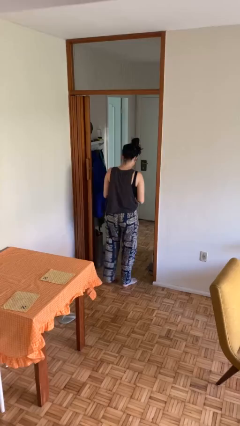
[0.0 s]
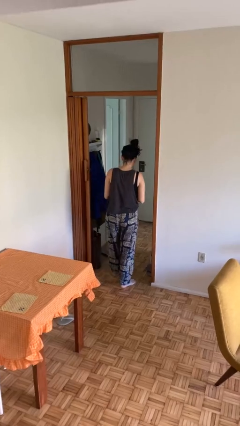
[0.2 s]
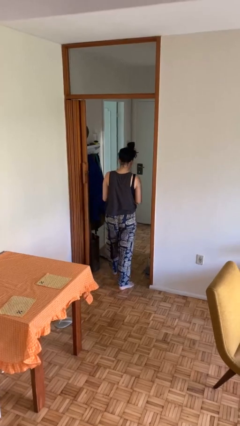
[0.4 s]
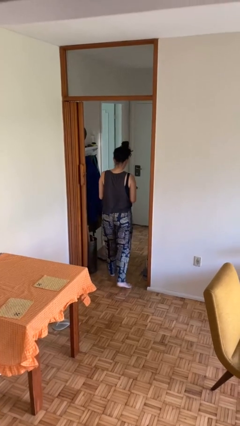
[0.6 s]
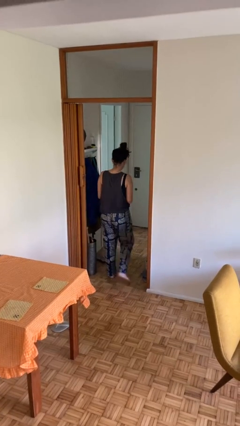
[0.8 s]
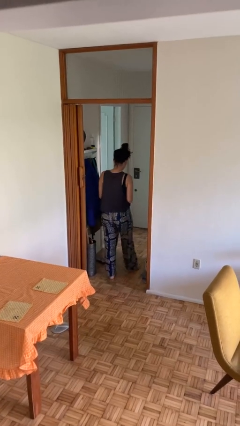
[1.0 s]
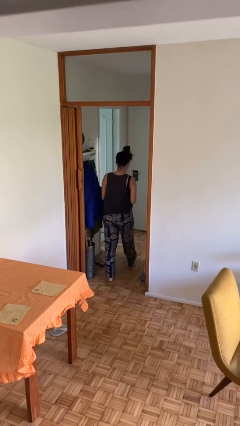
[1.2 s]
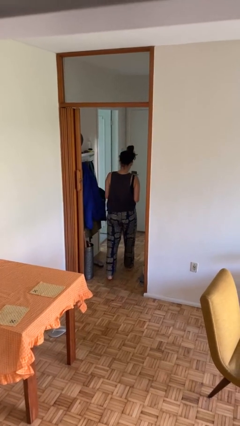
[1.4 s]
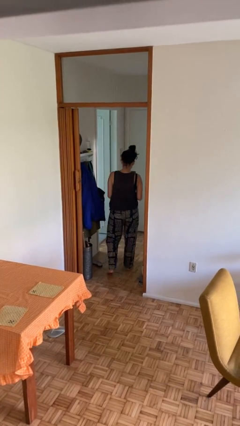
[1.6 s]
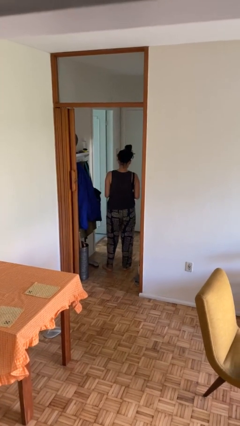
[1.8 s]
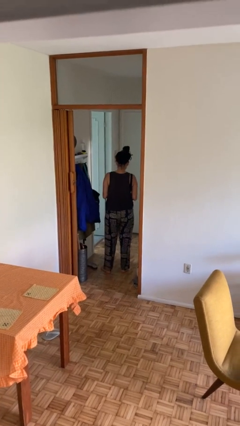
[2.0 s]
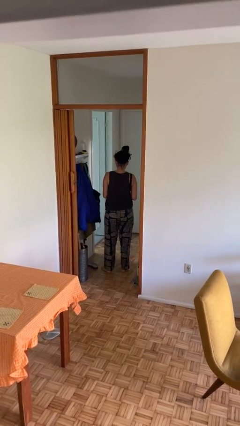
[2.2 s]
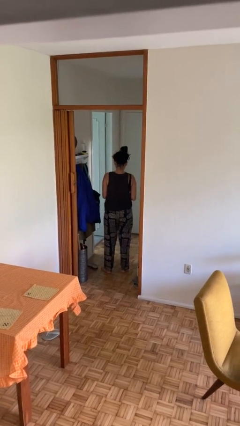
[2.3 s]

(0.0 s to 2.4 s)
person exits scene through structure

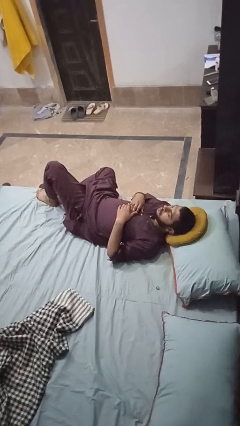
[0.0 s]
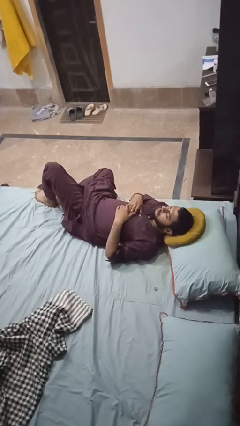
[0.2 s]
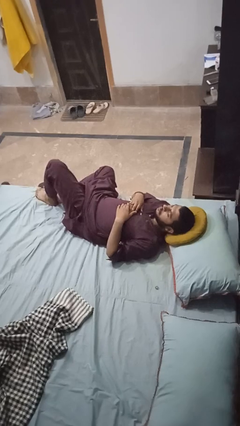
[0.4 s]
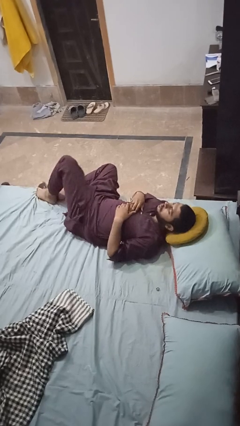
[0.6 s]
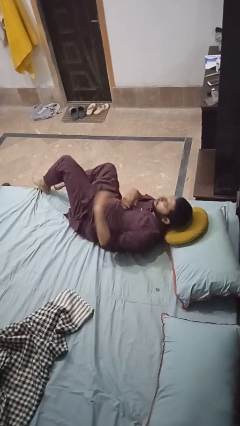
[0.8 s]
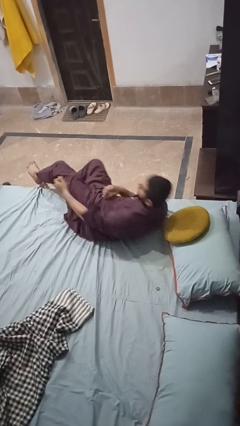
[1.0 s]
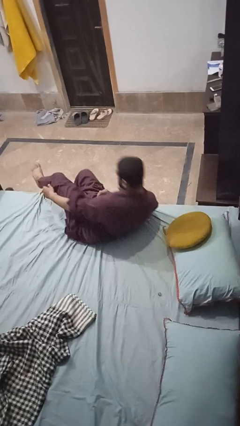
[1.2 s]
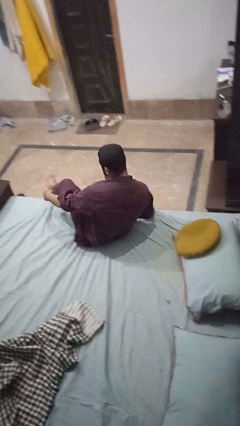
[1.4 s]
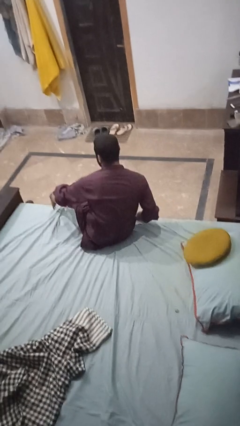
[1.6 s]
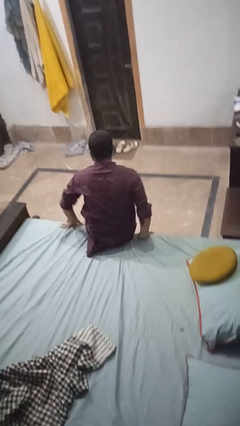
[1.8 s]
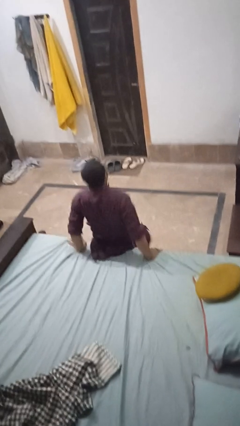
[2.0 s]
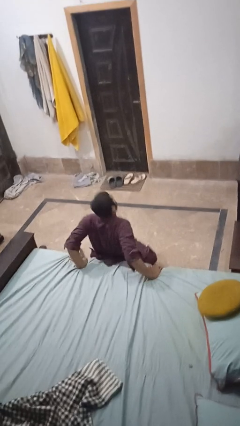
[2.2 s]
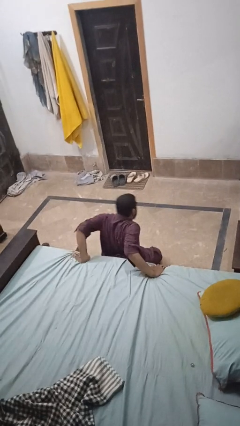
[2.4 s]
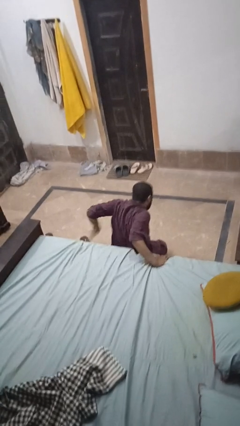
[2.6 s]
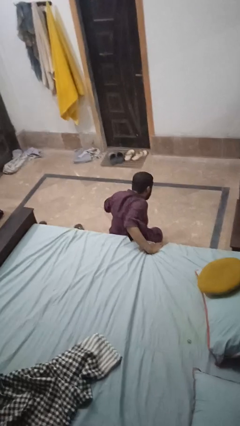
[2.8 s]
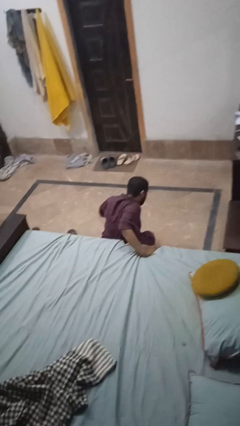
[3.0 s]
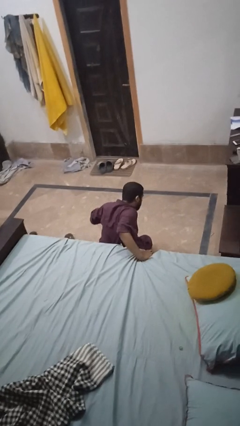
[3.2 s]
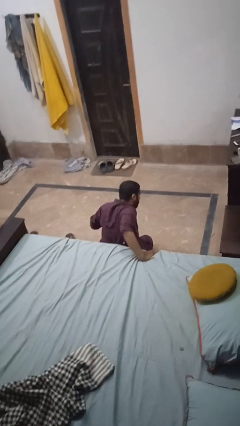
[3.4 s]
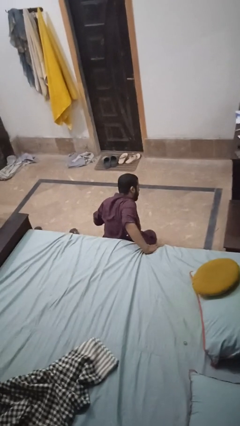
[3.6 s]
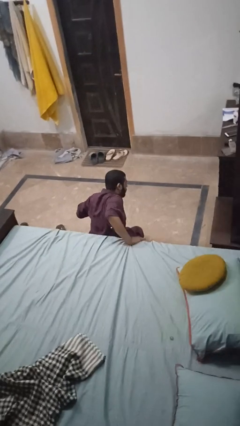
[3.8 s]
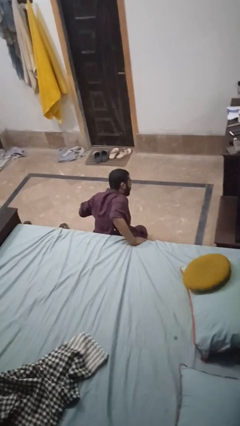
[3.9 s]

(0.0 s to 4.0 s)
person falls from bed

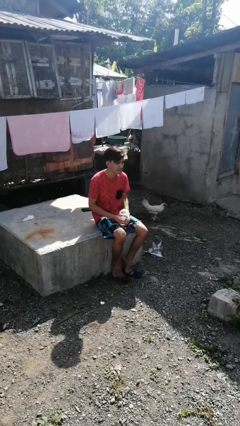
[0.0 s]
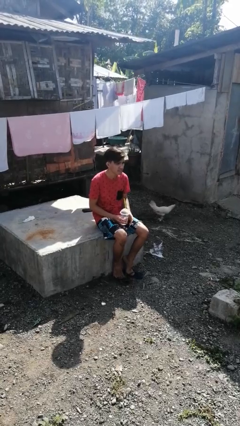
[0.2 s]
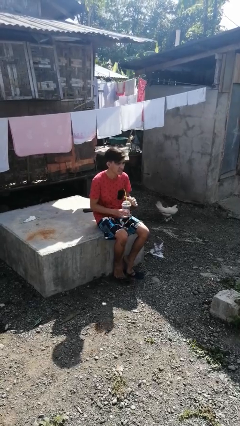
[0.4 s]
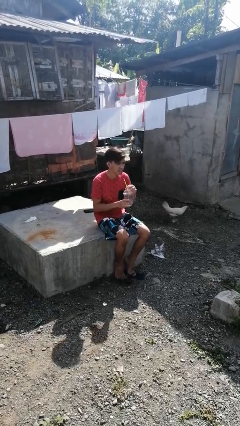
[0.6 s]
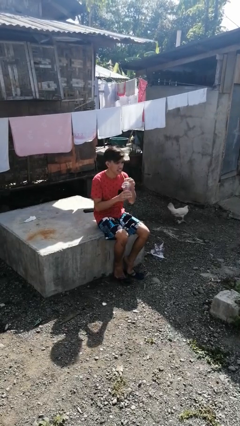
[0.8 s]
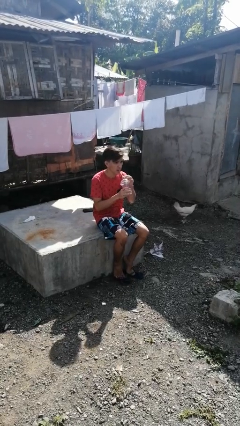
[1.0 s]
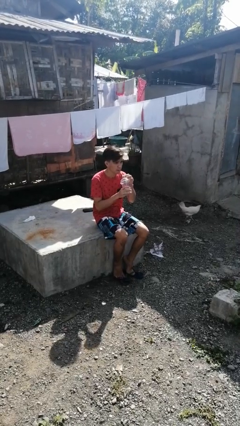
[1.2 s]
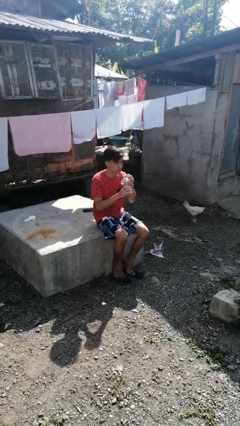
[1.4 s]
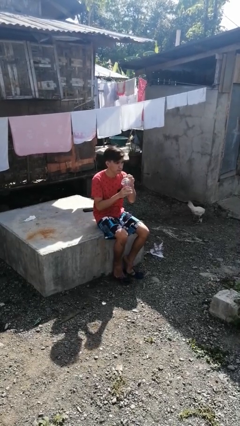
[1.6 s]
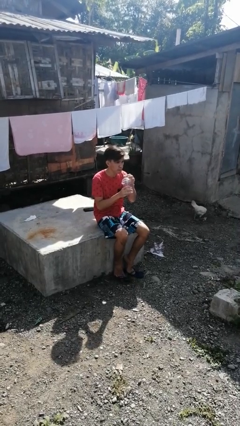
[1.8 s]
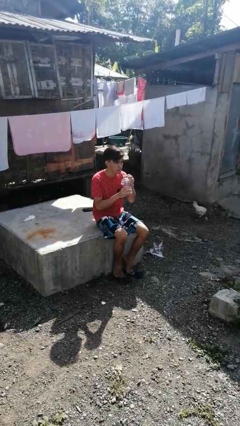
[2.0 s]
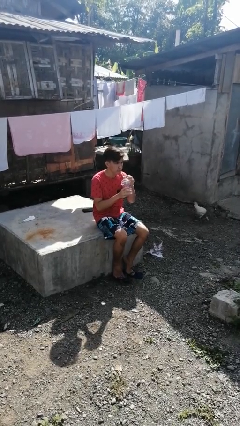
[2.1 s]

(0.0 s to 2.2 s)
person drinks from straw

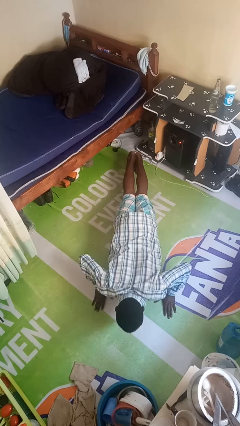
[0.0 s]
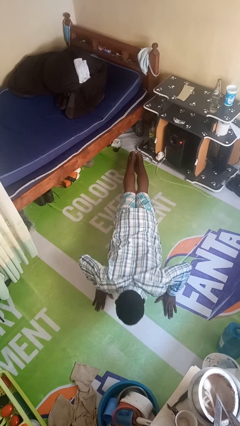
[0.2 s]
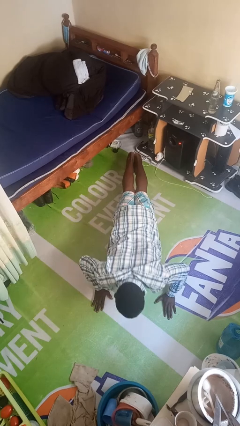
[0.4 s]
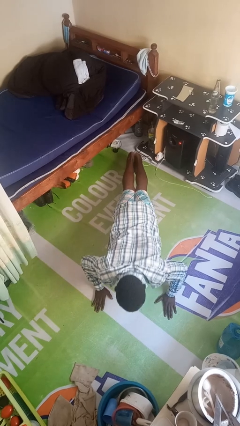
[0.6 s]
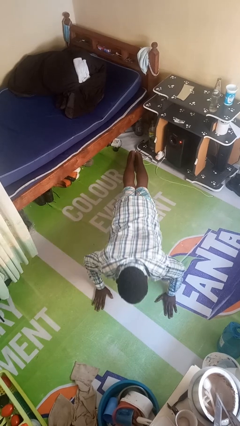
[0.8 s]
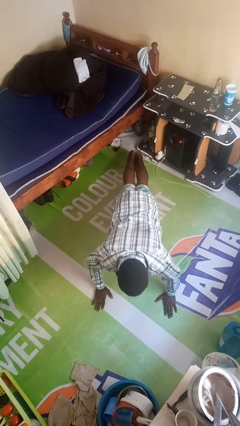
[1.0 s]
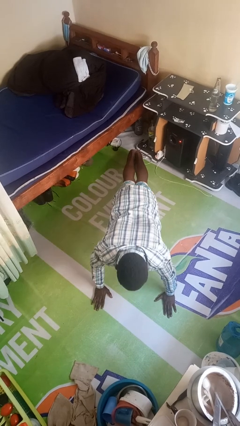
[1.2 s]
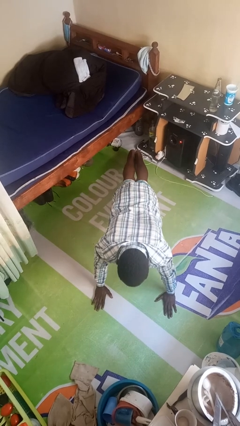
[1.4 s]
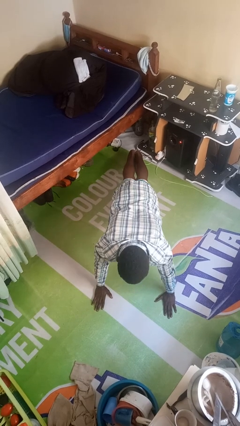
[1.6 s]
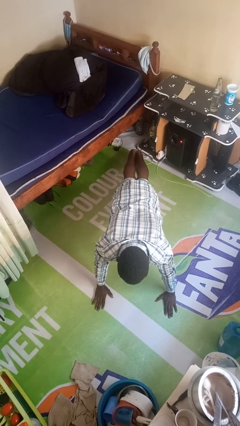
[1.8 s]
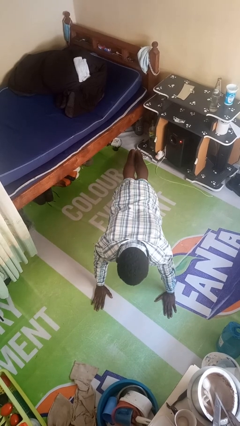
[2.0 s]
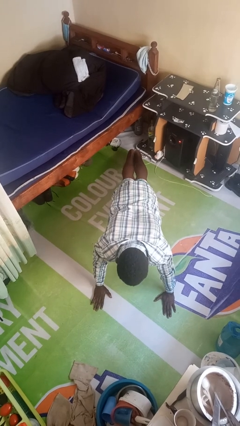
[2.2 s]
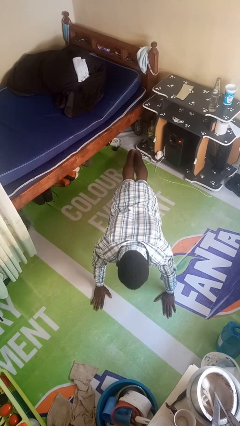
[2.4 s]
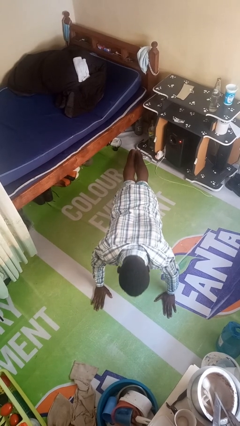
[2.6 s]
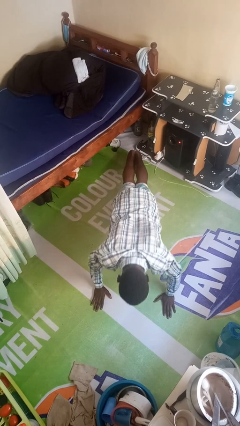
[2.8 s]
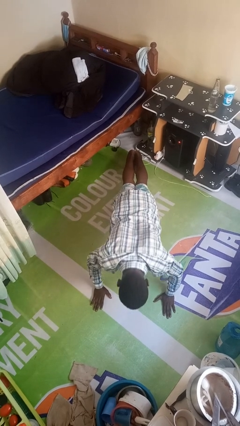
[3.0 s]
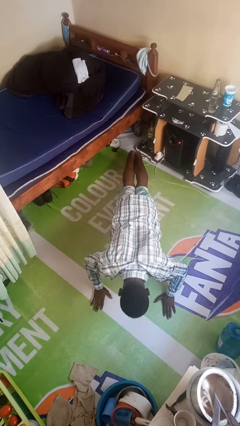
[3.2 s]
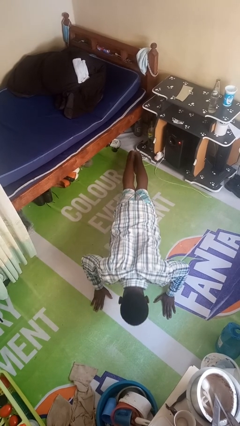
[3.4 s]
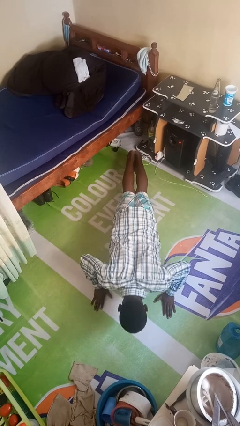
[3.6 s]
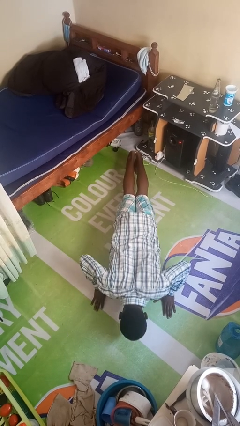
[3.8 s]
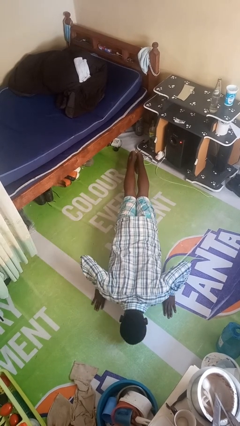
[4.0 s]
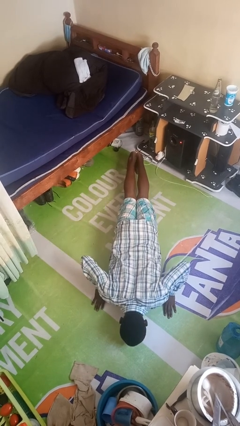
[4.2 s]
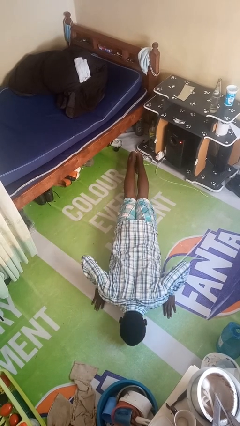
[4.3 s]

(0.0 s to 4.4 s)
person exercises with pushup

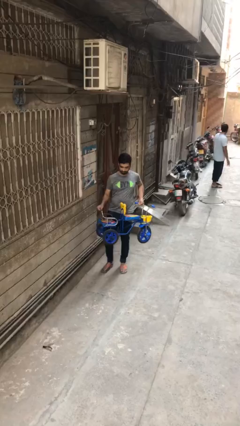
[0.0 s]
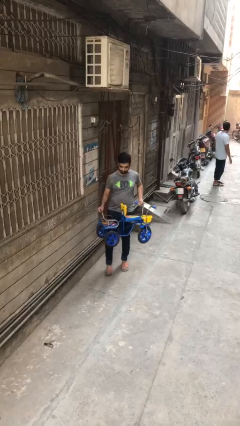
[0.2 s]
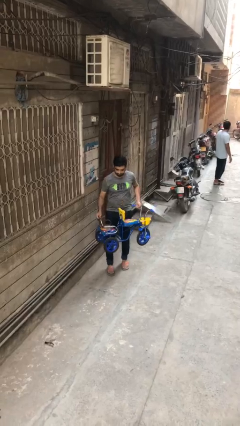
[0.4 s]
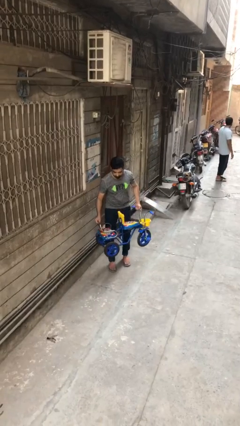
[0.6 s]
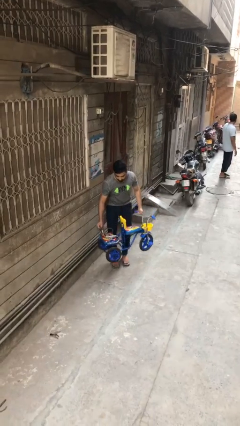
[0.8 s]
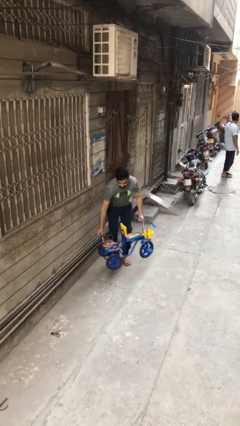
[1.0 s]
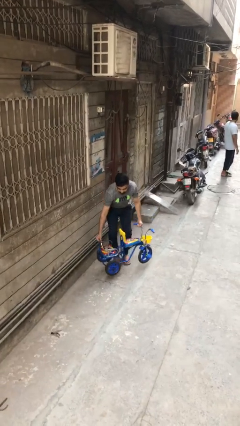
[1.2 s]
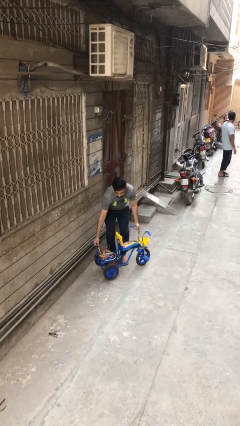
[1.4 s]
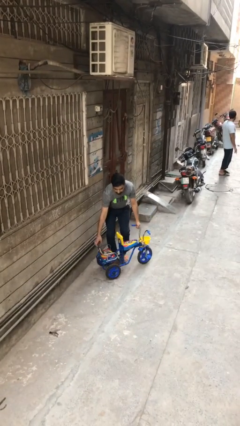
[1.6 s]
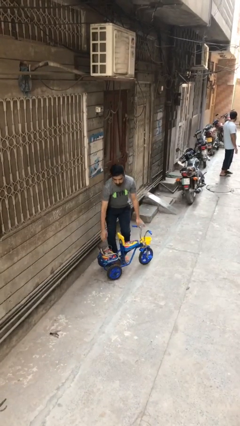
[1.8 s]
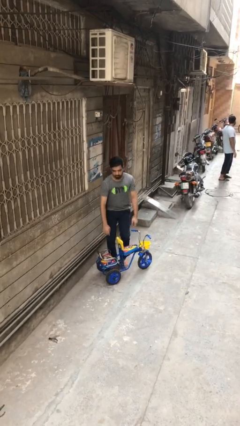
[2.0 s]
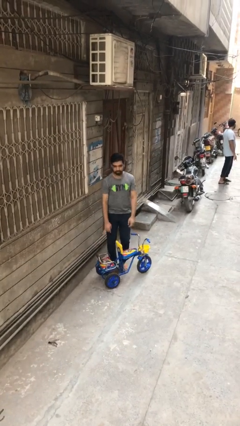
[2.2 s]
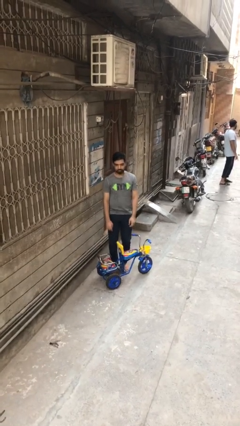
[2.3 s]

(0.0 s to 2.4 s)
person puts down object on floor

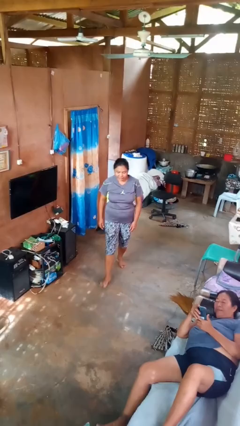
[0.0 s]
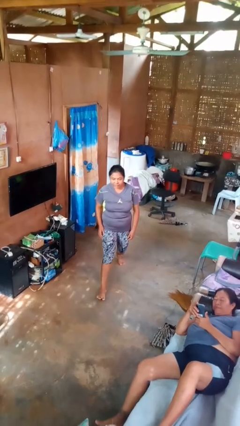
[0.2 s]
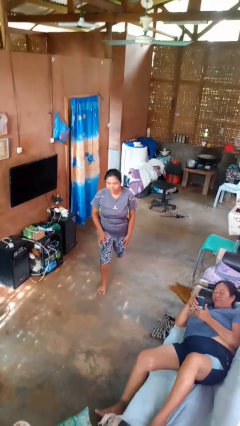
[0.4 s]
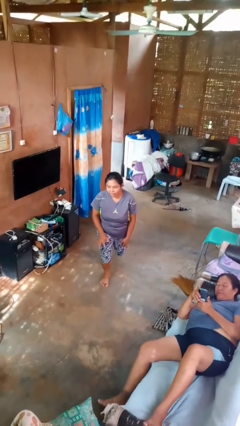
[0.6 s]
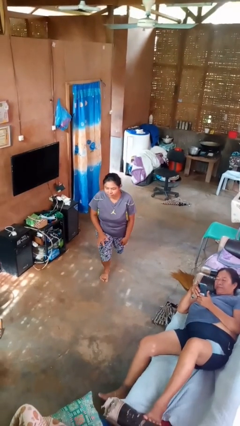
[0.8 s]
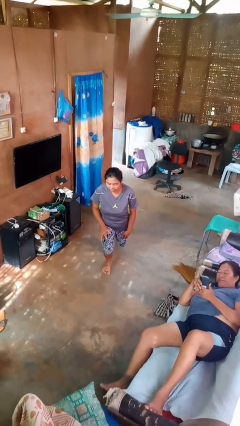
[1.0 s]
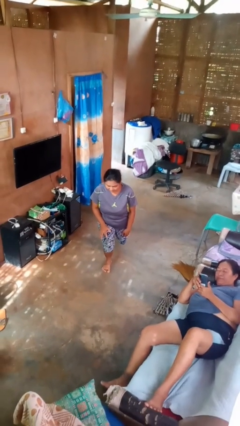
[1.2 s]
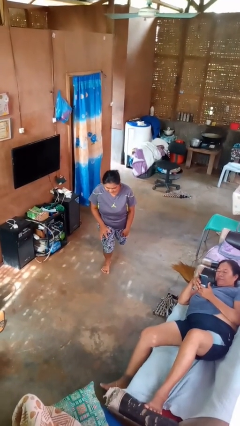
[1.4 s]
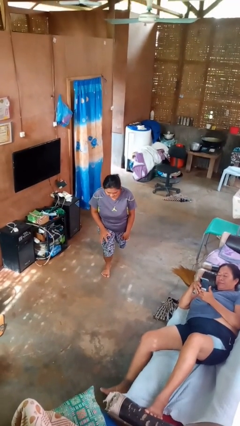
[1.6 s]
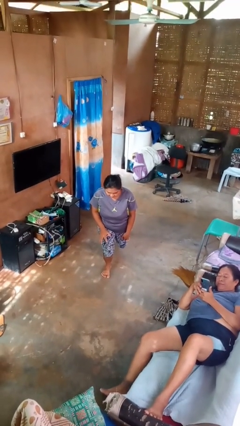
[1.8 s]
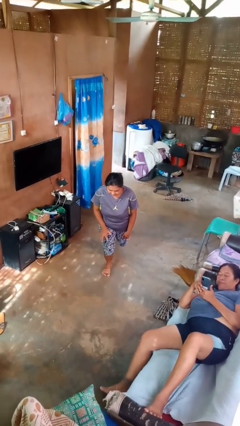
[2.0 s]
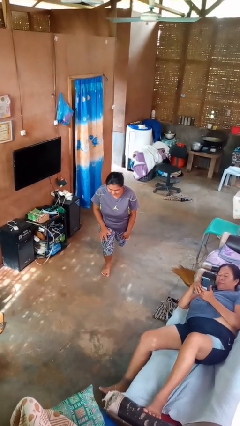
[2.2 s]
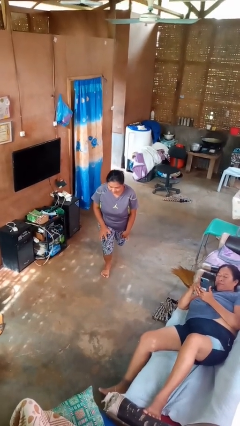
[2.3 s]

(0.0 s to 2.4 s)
person exercises with lunges
